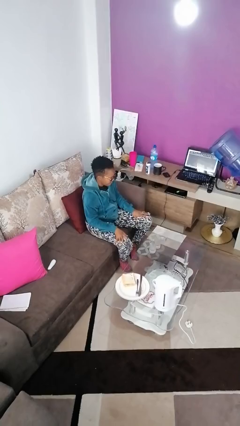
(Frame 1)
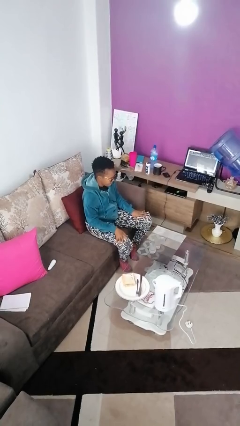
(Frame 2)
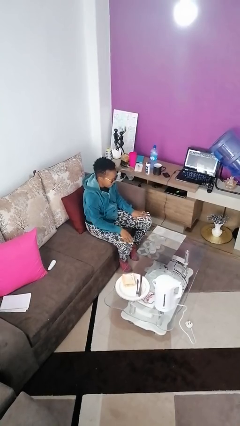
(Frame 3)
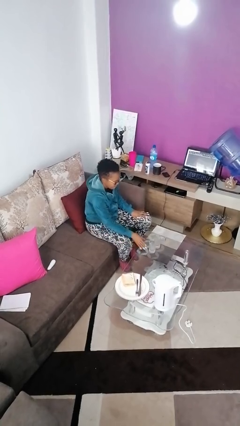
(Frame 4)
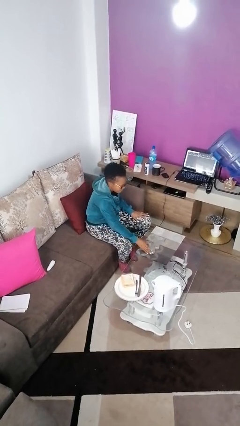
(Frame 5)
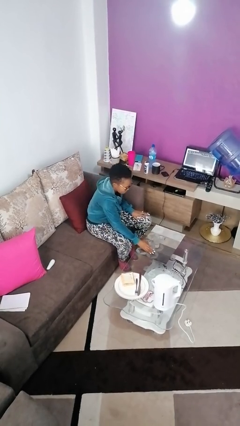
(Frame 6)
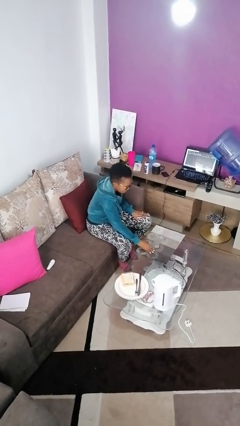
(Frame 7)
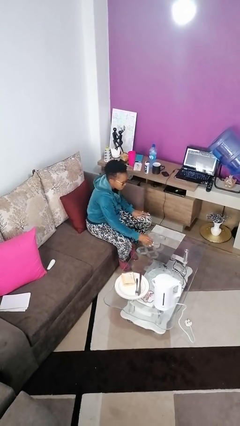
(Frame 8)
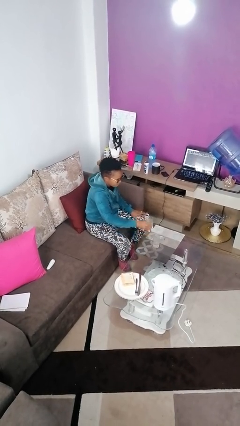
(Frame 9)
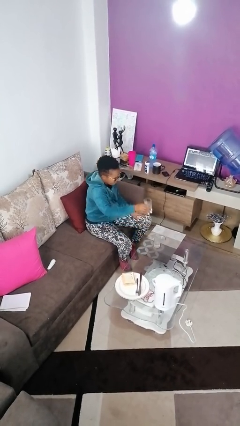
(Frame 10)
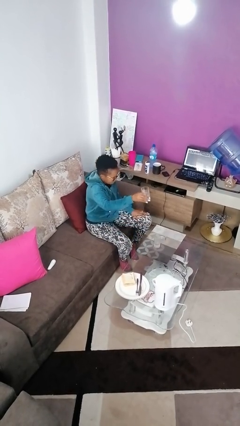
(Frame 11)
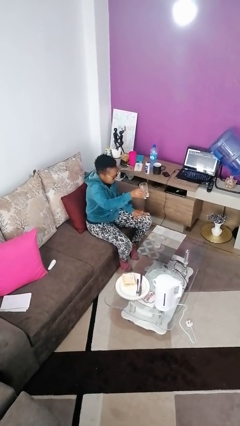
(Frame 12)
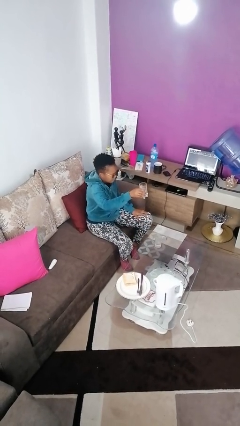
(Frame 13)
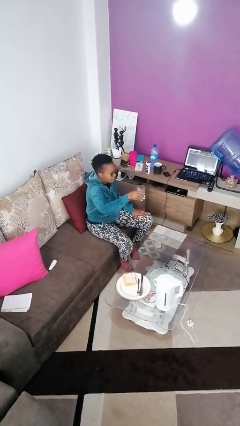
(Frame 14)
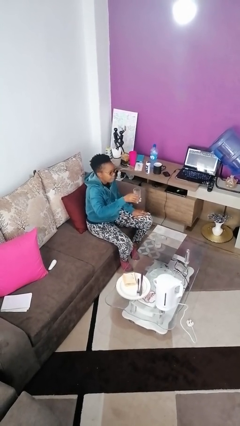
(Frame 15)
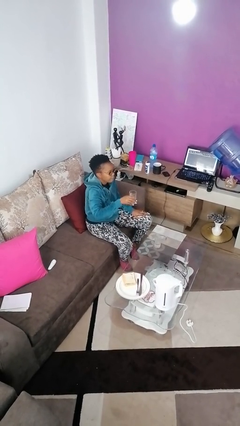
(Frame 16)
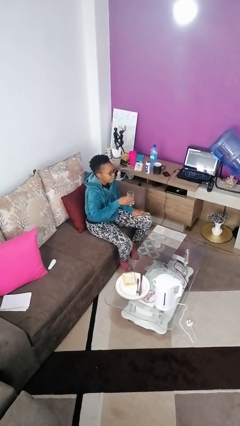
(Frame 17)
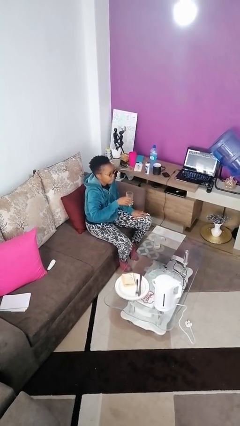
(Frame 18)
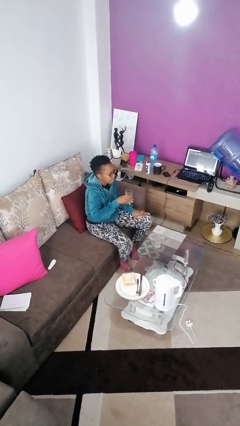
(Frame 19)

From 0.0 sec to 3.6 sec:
person picks up object from table

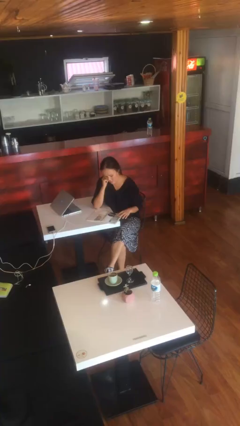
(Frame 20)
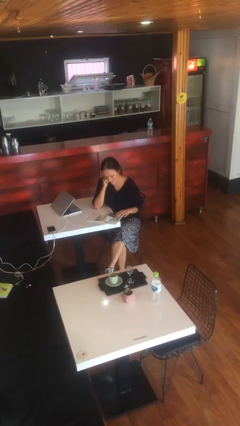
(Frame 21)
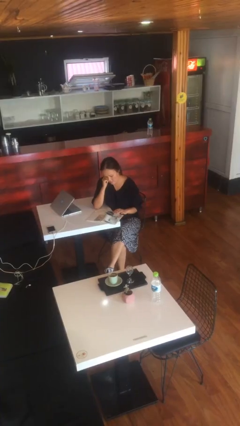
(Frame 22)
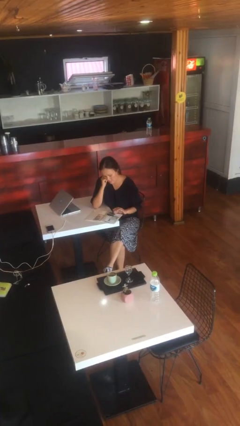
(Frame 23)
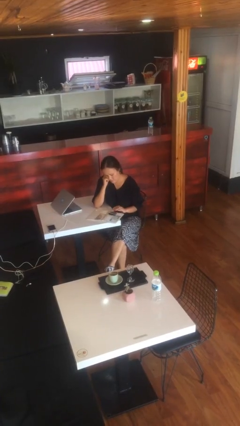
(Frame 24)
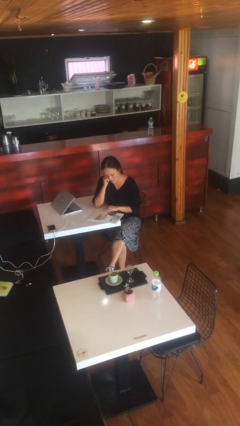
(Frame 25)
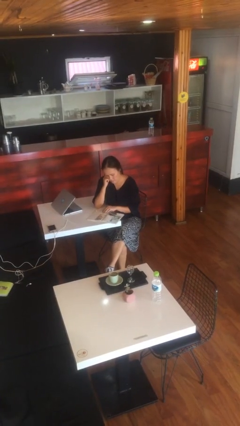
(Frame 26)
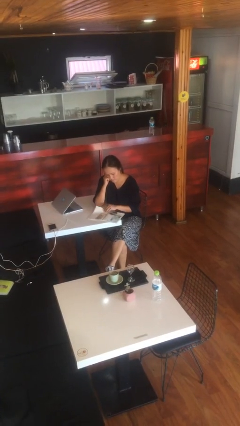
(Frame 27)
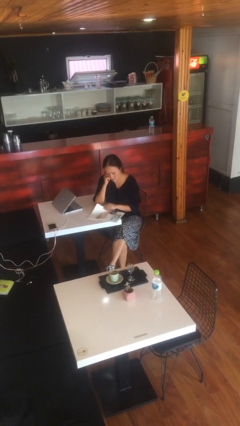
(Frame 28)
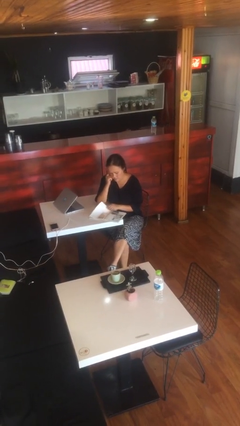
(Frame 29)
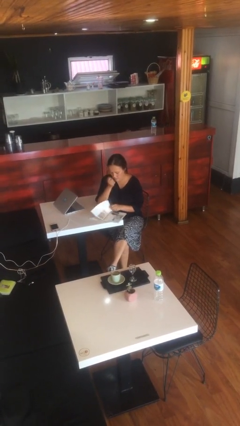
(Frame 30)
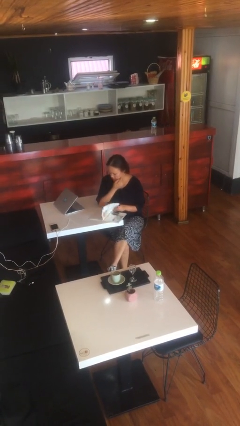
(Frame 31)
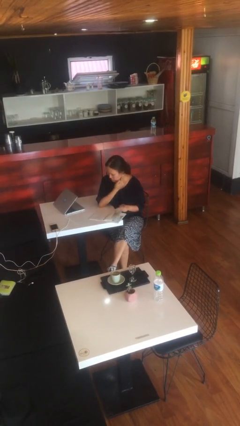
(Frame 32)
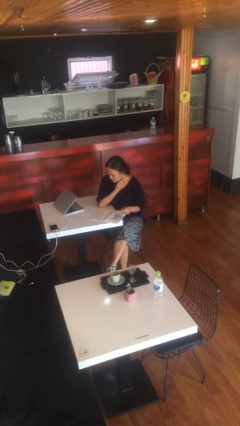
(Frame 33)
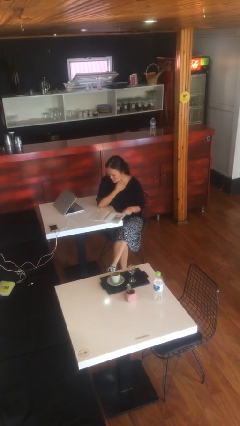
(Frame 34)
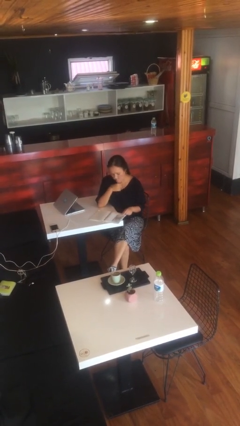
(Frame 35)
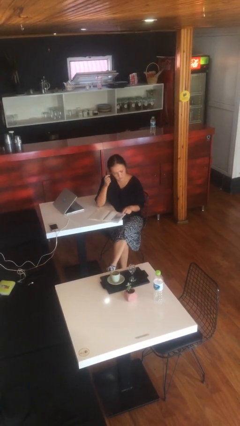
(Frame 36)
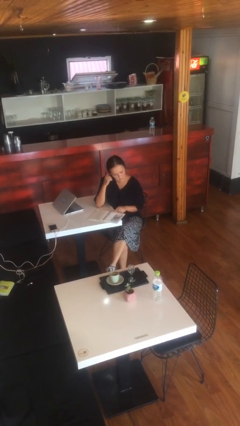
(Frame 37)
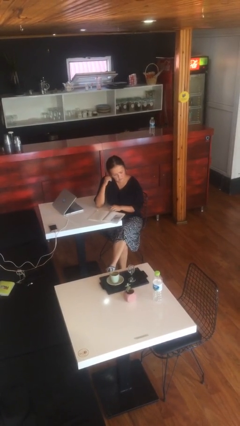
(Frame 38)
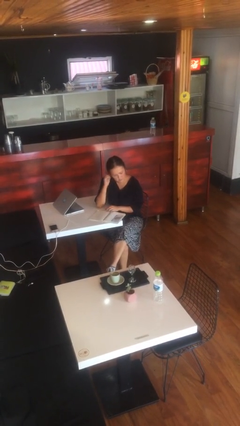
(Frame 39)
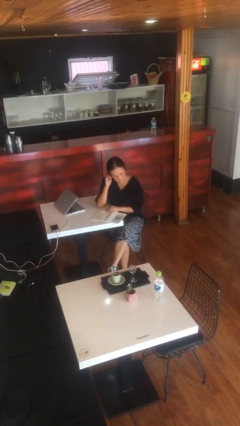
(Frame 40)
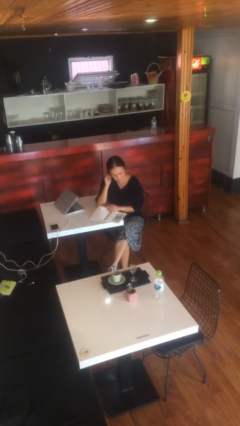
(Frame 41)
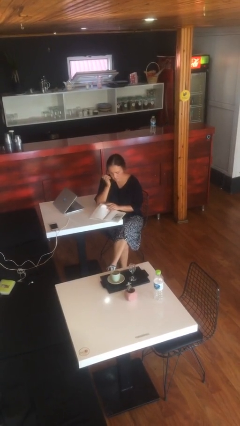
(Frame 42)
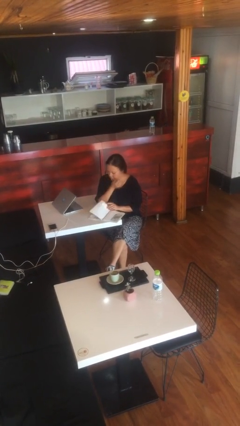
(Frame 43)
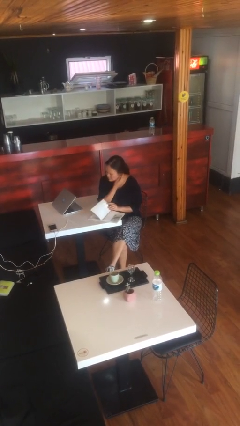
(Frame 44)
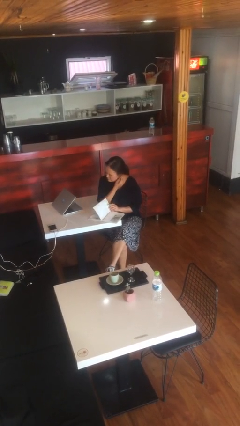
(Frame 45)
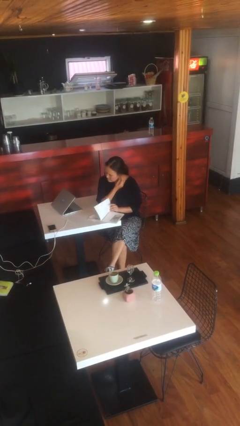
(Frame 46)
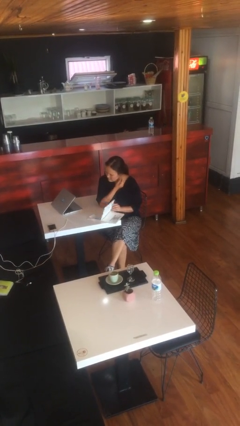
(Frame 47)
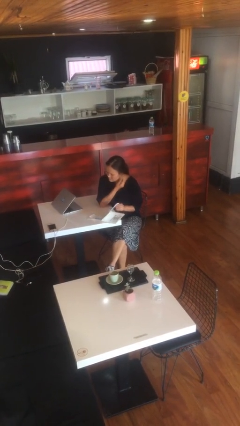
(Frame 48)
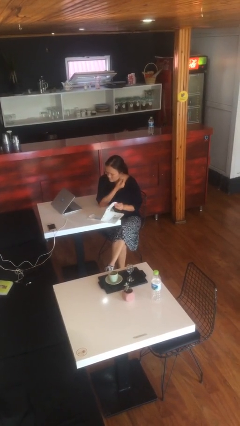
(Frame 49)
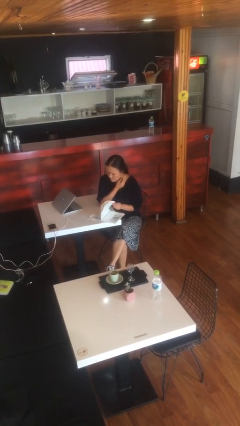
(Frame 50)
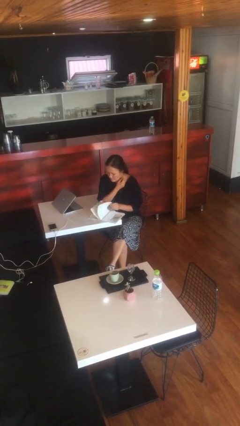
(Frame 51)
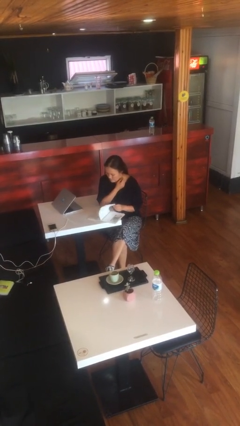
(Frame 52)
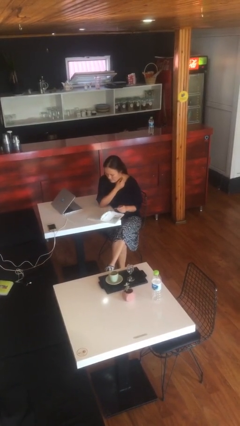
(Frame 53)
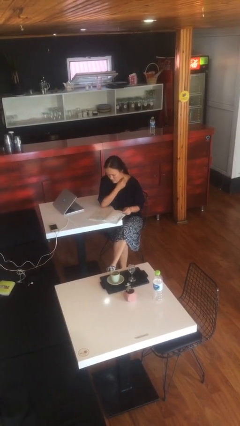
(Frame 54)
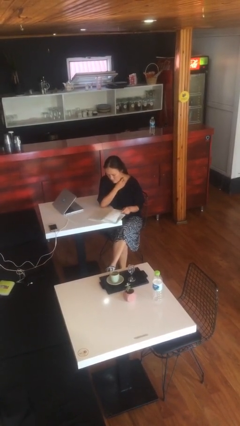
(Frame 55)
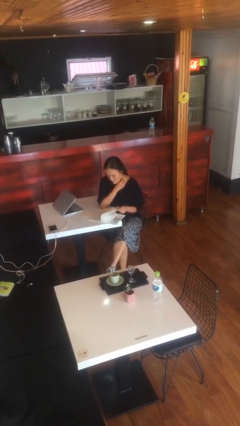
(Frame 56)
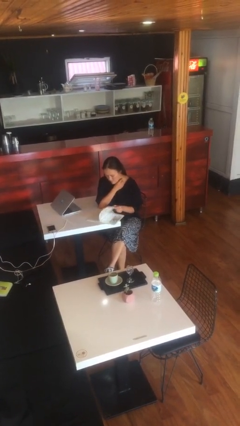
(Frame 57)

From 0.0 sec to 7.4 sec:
person reads document

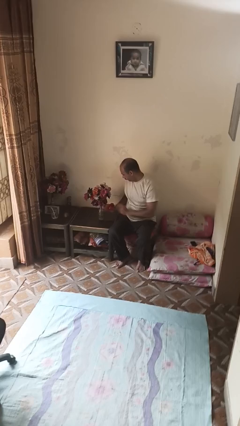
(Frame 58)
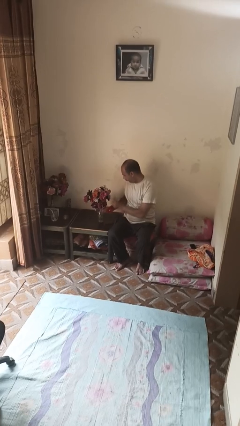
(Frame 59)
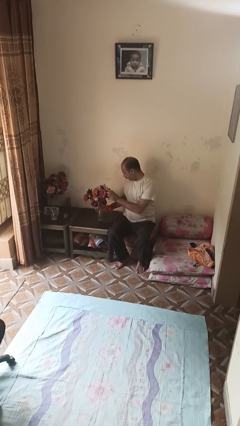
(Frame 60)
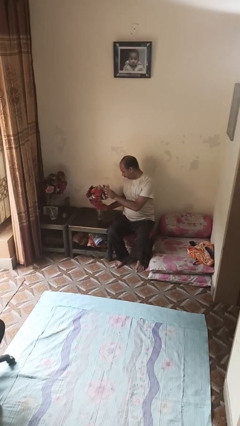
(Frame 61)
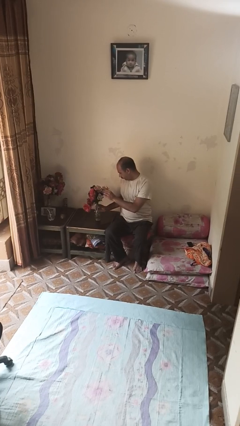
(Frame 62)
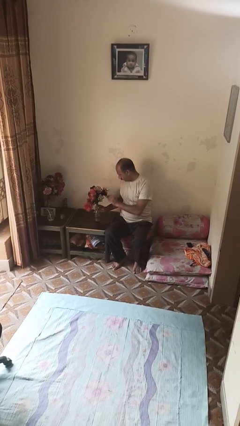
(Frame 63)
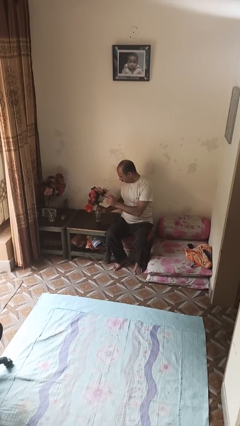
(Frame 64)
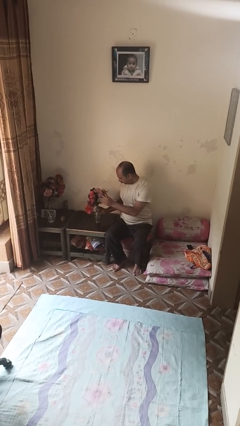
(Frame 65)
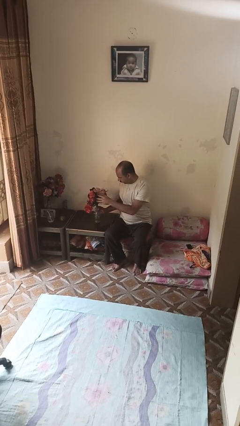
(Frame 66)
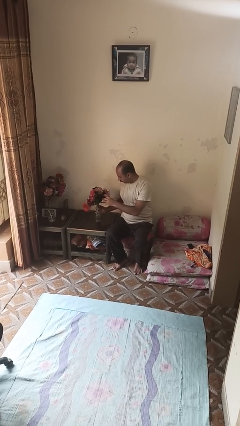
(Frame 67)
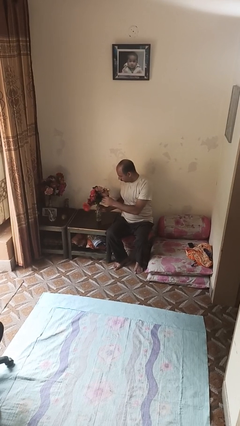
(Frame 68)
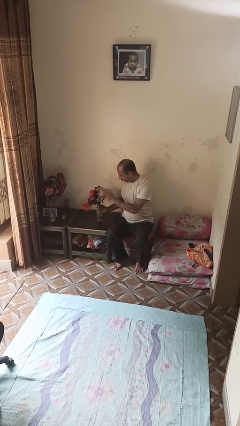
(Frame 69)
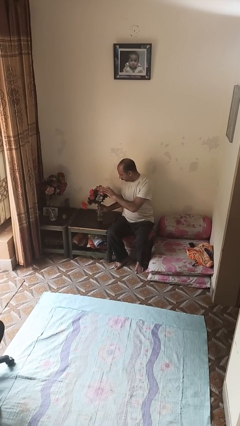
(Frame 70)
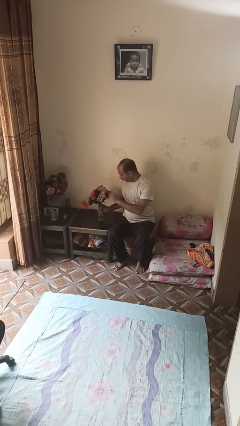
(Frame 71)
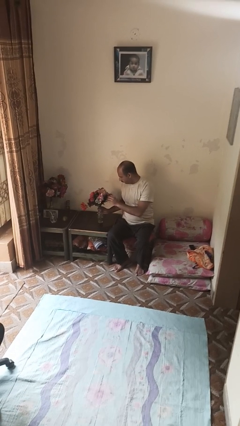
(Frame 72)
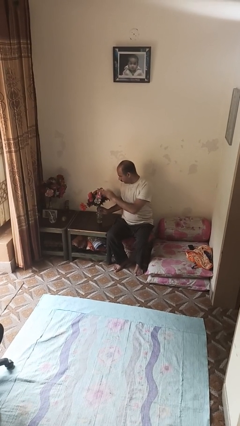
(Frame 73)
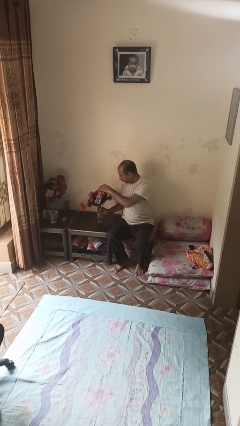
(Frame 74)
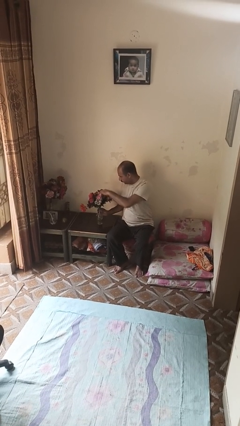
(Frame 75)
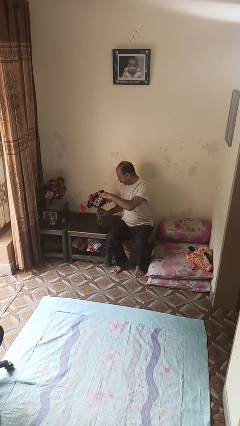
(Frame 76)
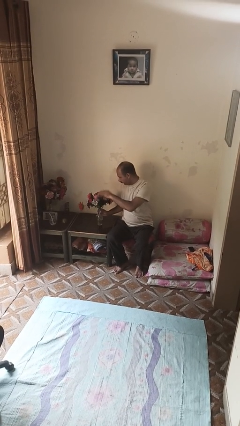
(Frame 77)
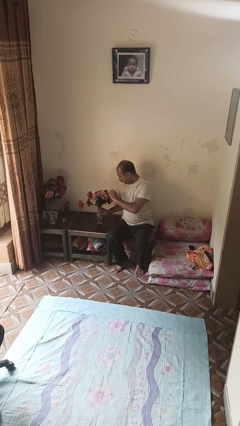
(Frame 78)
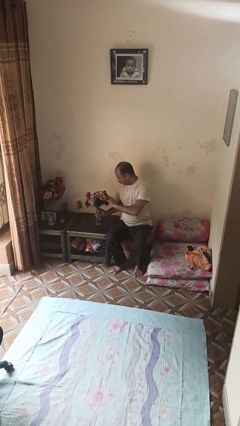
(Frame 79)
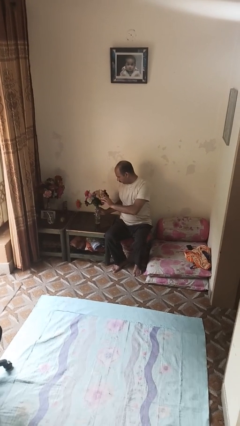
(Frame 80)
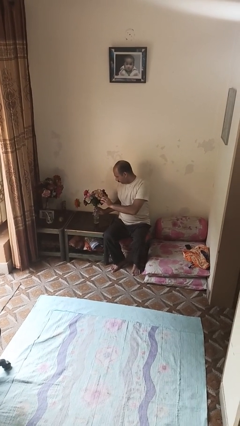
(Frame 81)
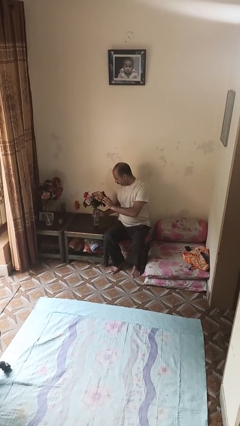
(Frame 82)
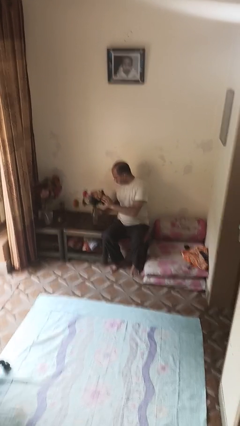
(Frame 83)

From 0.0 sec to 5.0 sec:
person arranges flowers in vase

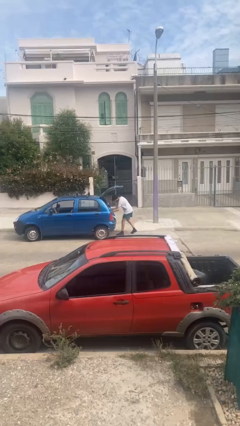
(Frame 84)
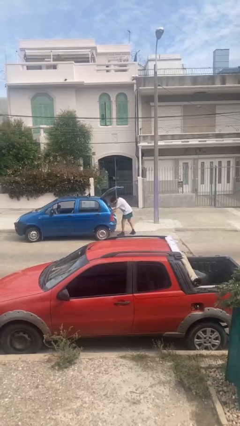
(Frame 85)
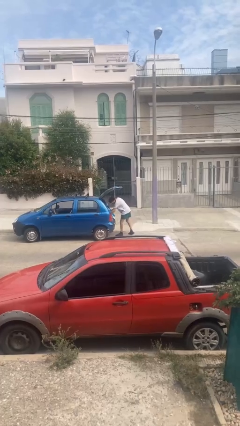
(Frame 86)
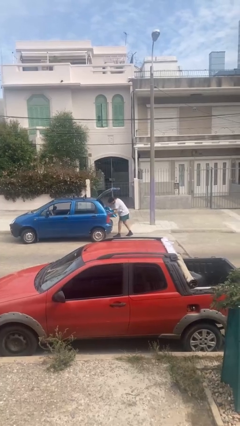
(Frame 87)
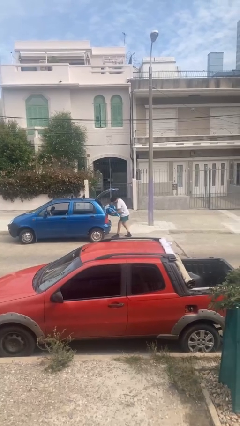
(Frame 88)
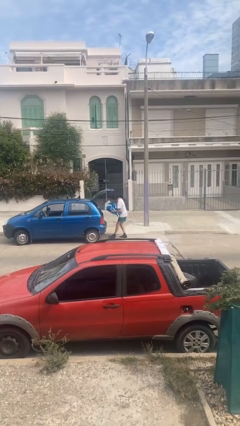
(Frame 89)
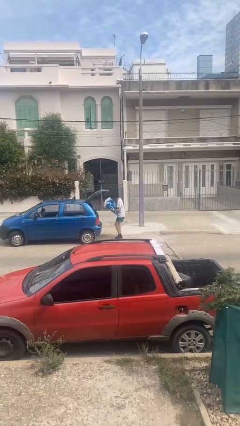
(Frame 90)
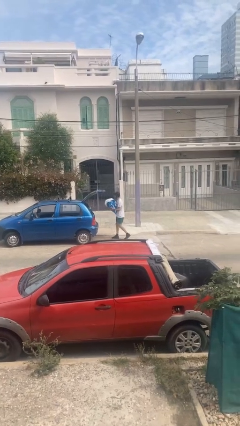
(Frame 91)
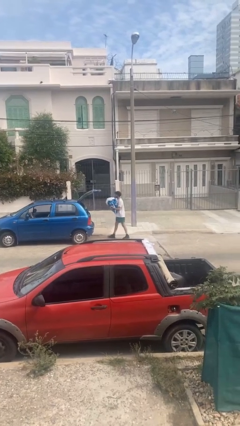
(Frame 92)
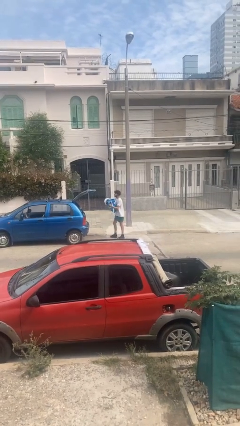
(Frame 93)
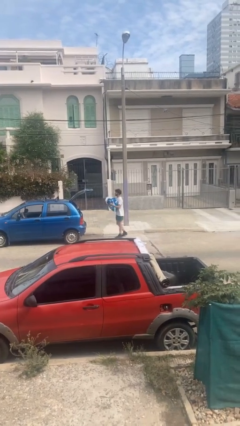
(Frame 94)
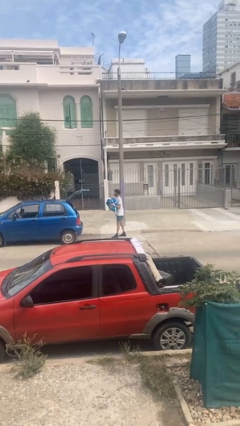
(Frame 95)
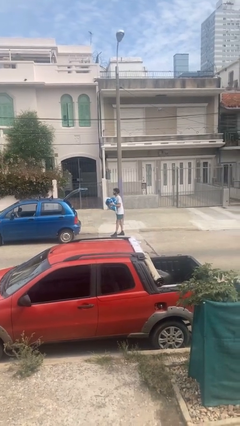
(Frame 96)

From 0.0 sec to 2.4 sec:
person unloads car
